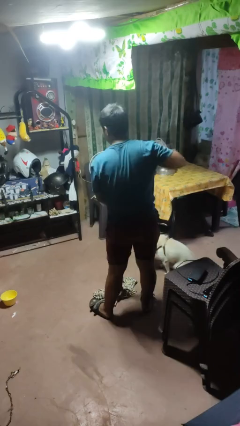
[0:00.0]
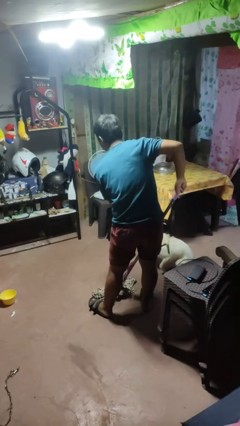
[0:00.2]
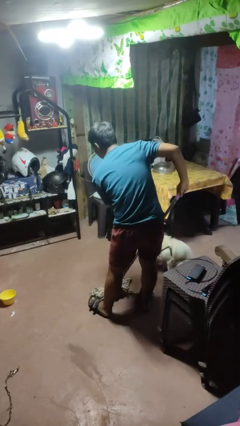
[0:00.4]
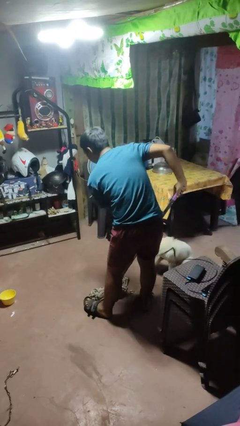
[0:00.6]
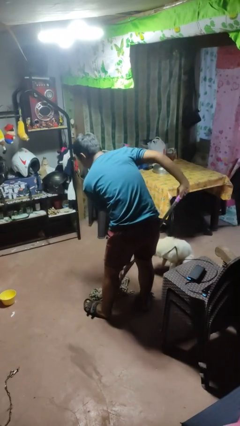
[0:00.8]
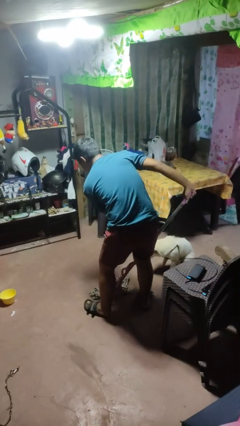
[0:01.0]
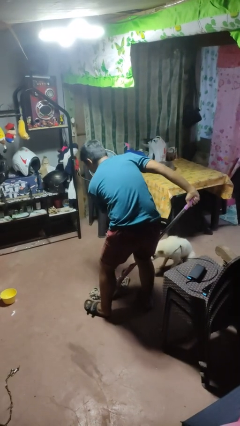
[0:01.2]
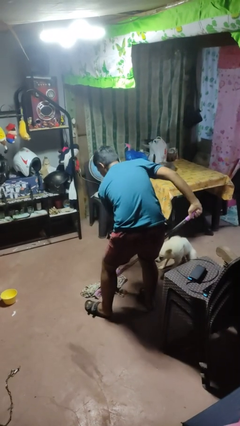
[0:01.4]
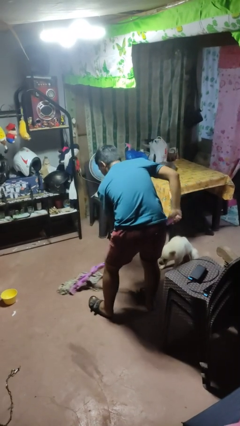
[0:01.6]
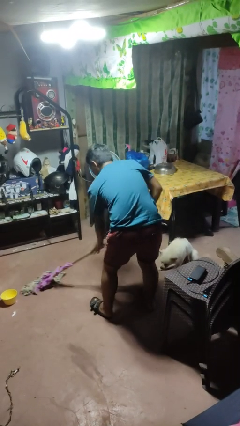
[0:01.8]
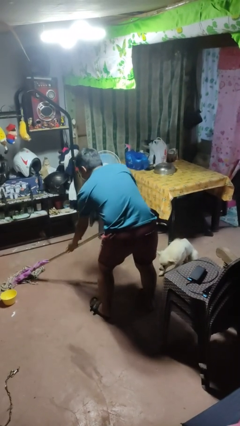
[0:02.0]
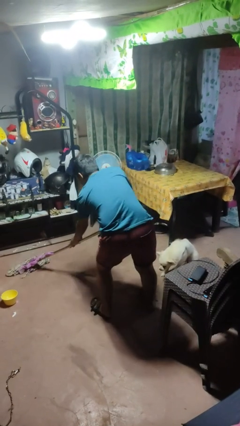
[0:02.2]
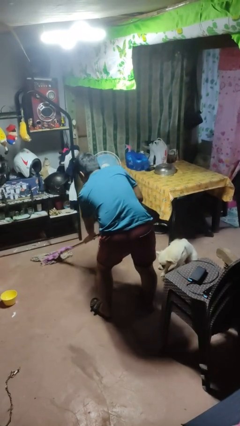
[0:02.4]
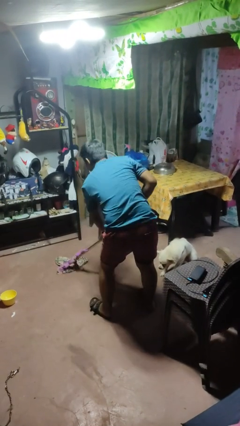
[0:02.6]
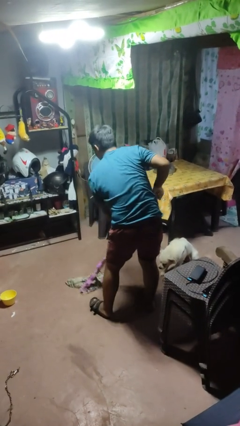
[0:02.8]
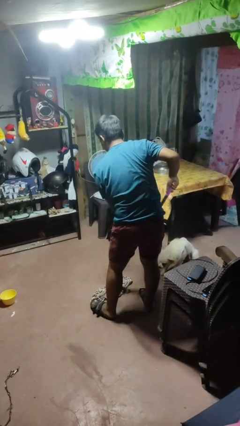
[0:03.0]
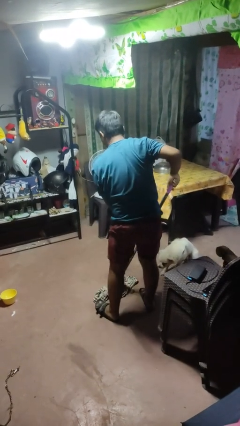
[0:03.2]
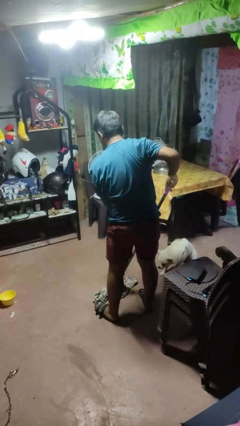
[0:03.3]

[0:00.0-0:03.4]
person mops

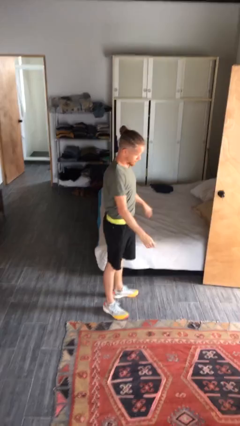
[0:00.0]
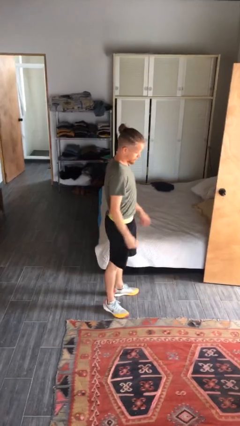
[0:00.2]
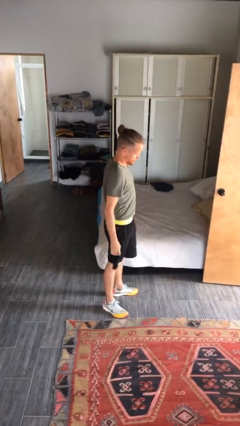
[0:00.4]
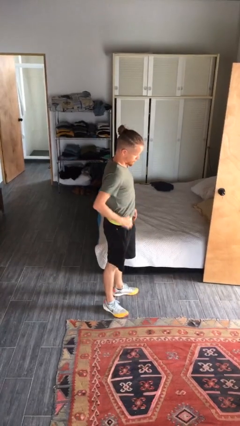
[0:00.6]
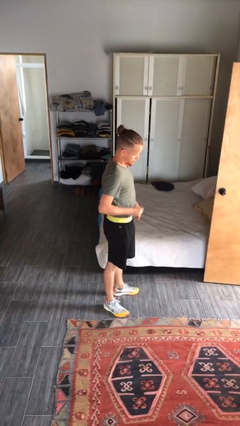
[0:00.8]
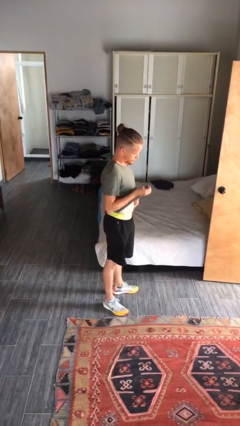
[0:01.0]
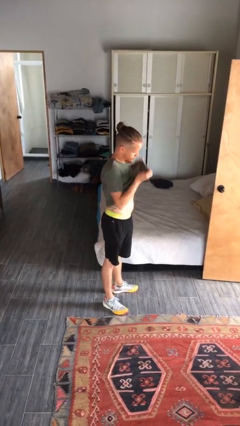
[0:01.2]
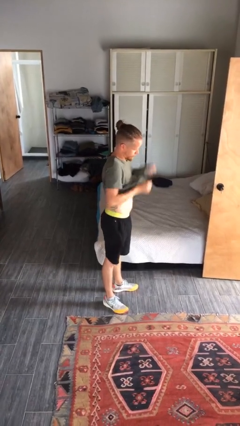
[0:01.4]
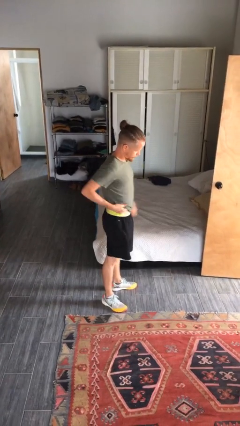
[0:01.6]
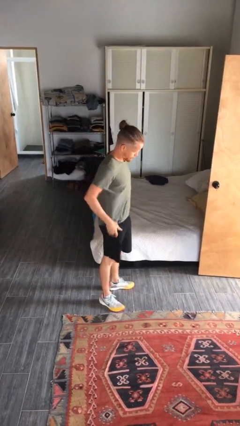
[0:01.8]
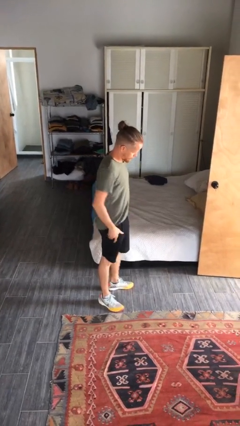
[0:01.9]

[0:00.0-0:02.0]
person untucks shirt

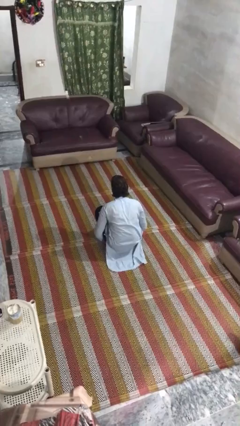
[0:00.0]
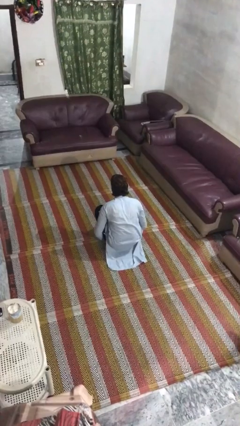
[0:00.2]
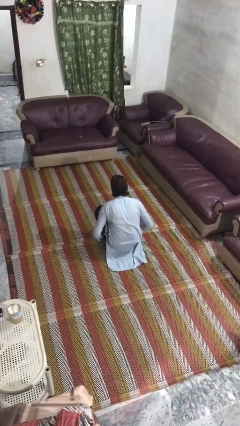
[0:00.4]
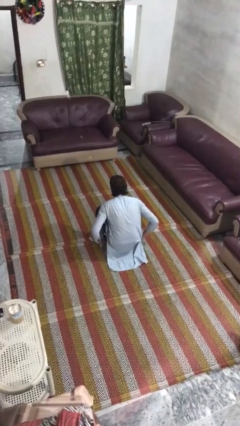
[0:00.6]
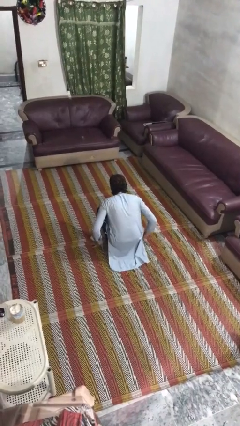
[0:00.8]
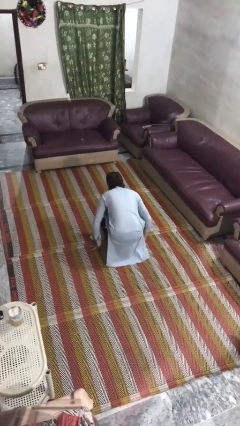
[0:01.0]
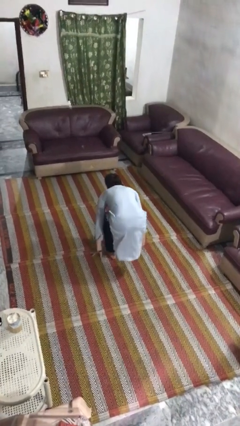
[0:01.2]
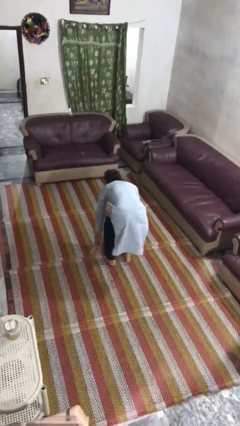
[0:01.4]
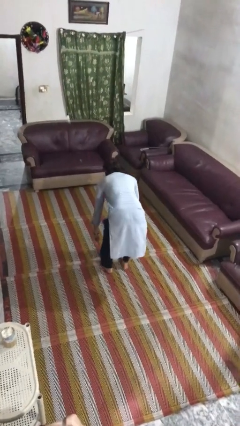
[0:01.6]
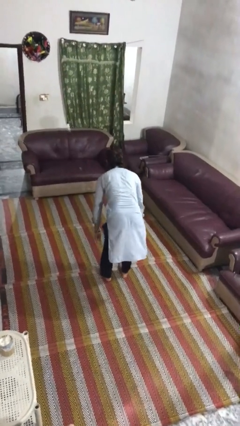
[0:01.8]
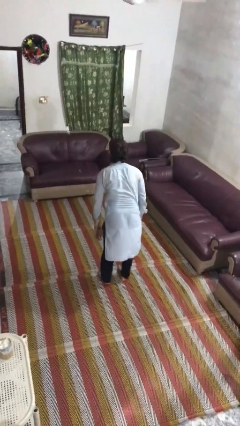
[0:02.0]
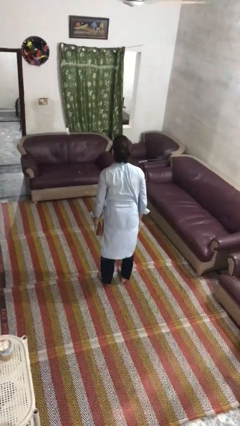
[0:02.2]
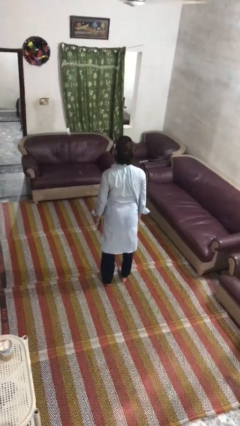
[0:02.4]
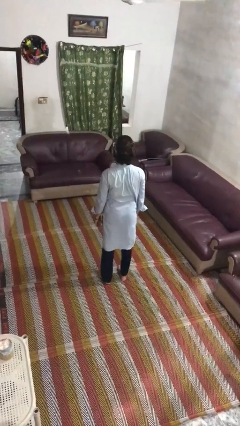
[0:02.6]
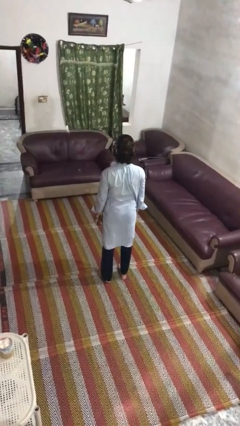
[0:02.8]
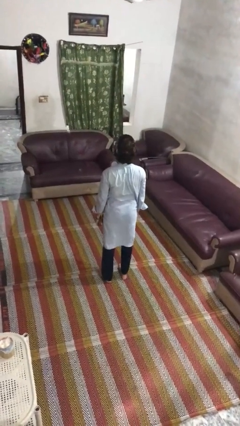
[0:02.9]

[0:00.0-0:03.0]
person stands up

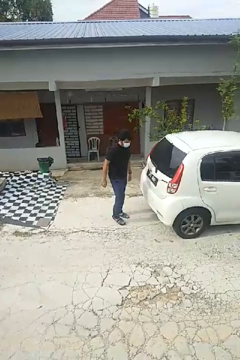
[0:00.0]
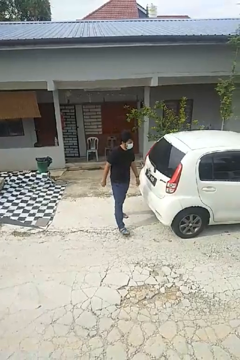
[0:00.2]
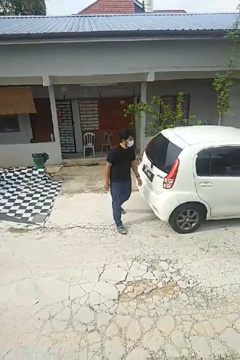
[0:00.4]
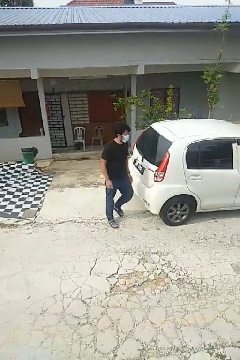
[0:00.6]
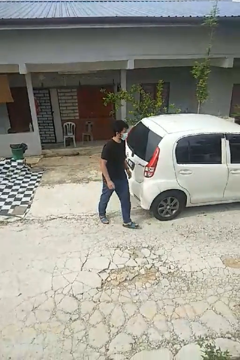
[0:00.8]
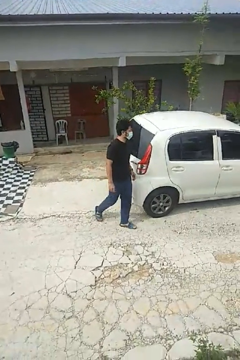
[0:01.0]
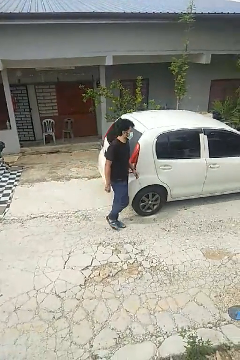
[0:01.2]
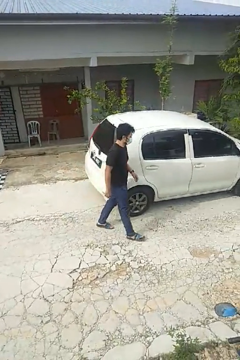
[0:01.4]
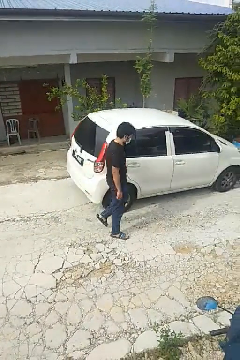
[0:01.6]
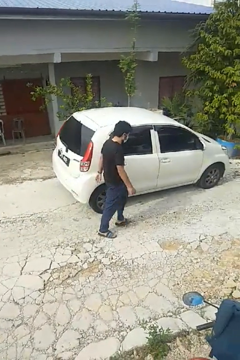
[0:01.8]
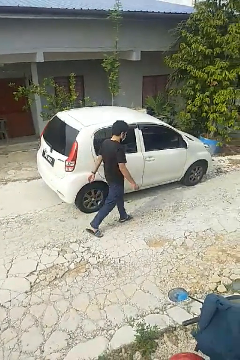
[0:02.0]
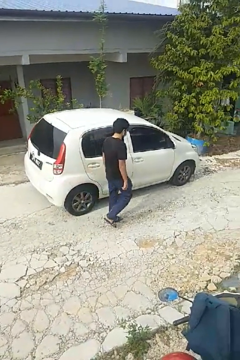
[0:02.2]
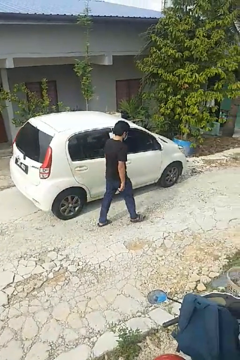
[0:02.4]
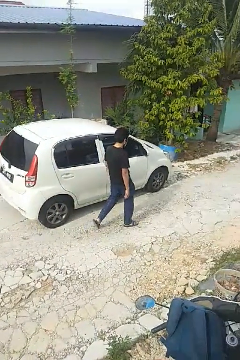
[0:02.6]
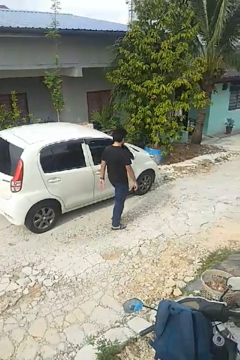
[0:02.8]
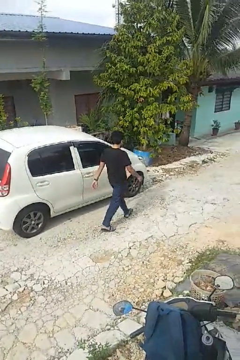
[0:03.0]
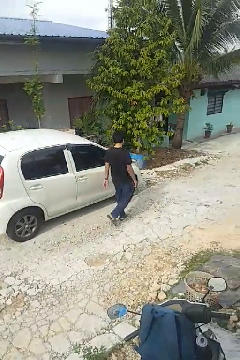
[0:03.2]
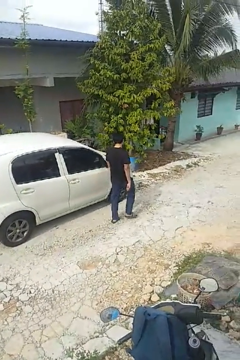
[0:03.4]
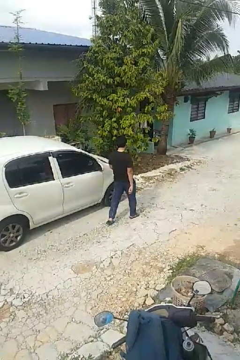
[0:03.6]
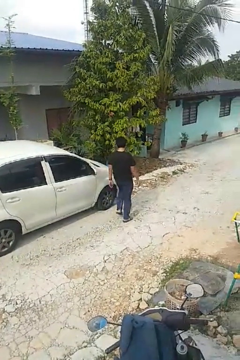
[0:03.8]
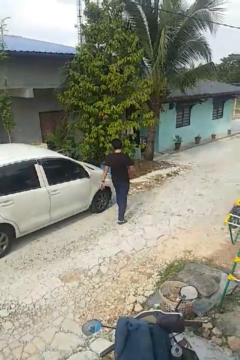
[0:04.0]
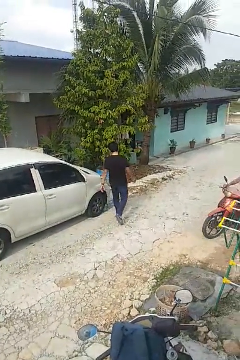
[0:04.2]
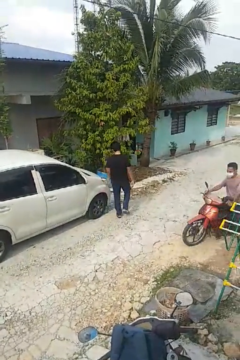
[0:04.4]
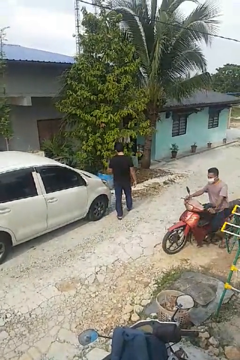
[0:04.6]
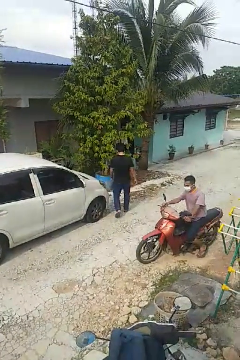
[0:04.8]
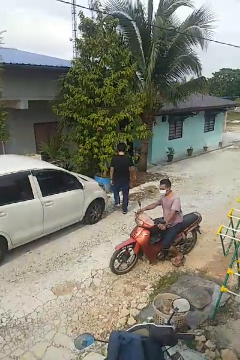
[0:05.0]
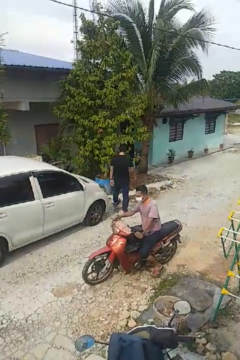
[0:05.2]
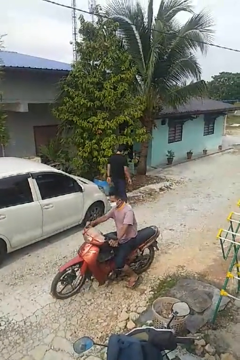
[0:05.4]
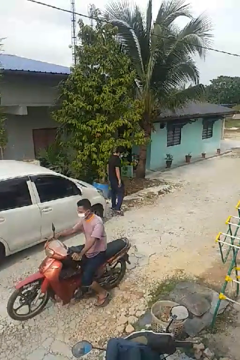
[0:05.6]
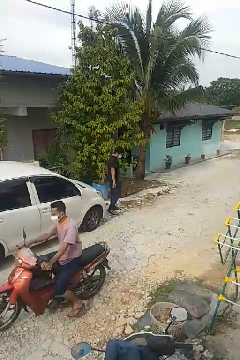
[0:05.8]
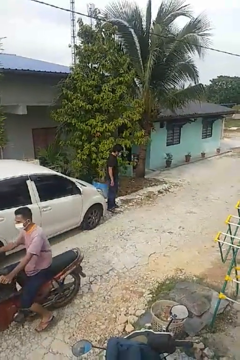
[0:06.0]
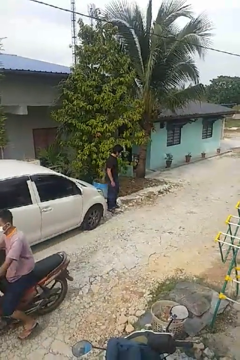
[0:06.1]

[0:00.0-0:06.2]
person walks around car

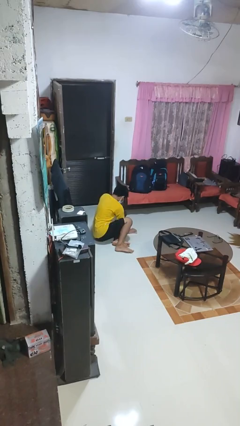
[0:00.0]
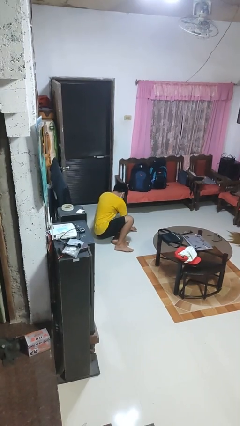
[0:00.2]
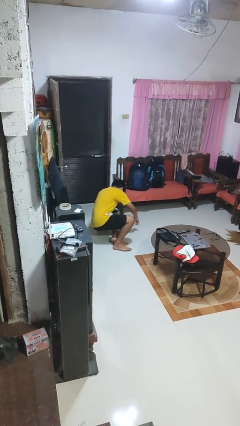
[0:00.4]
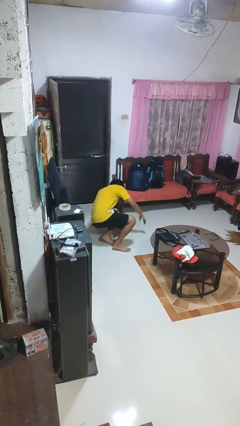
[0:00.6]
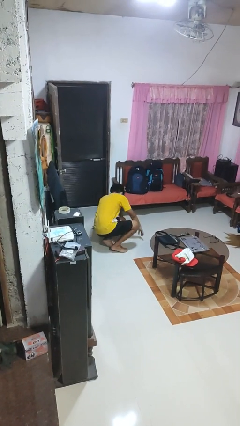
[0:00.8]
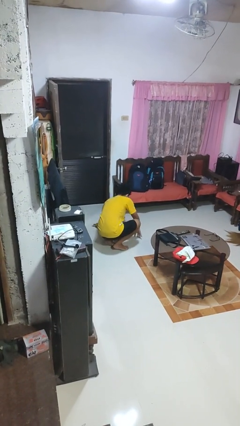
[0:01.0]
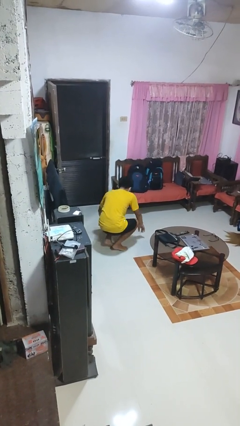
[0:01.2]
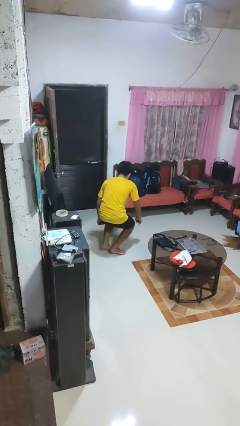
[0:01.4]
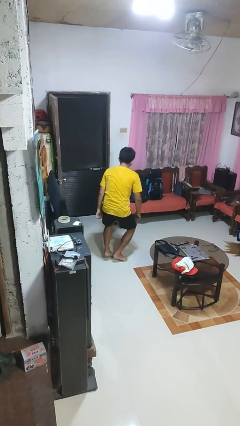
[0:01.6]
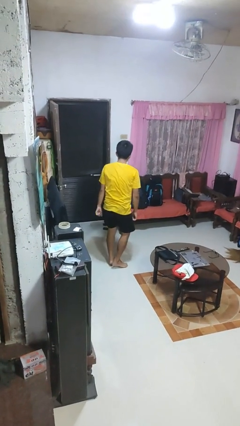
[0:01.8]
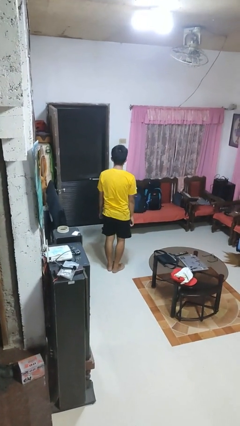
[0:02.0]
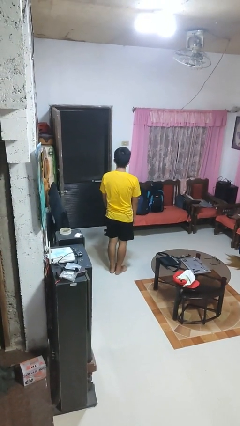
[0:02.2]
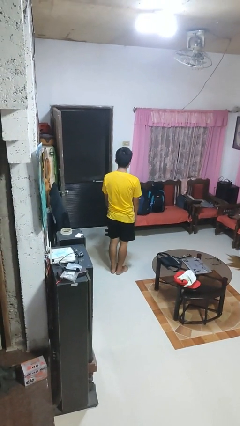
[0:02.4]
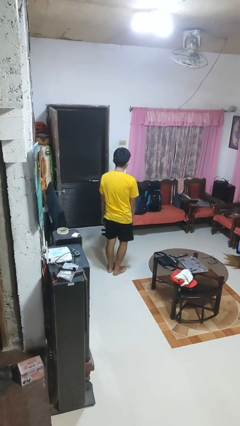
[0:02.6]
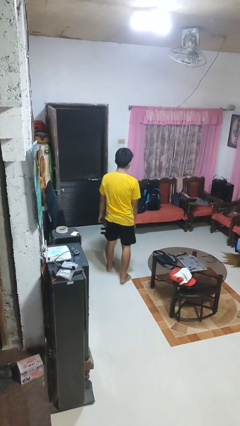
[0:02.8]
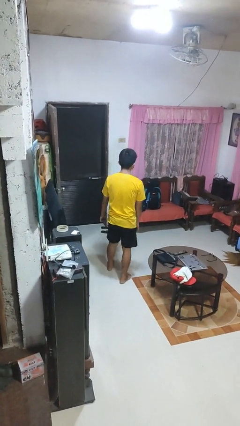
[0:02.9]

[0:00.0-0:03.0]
person stands up from floor

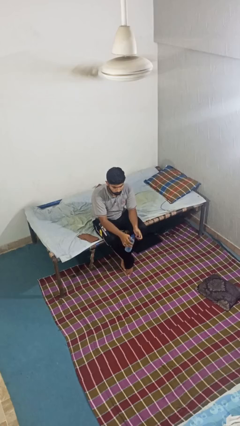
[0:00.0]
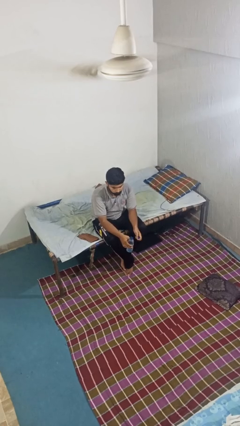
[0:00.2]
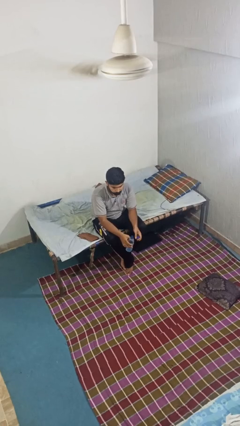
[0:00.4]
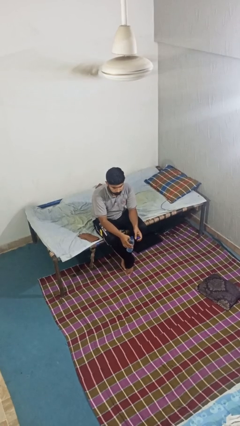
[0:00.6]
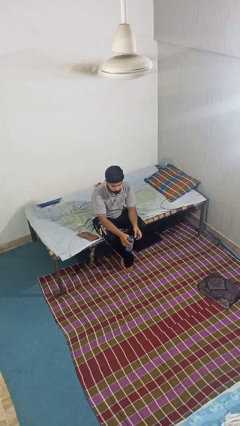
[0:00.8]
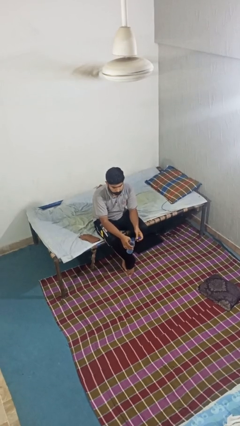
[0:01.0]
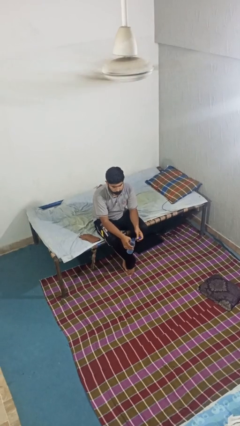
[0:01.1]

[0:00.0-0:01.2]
person drinks from bottle
